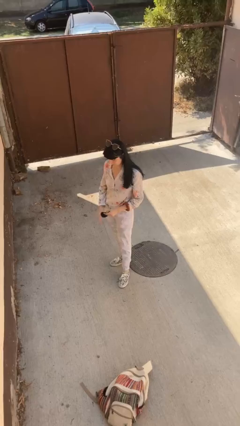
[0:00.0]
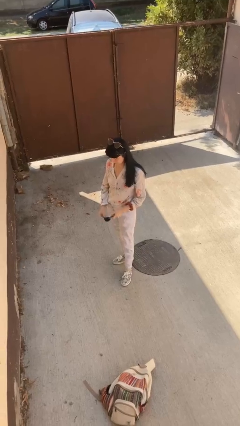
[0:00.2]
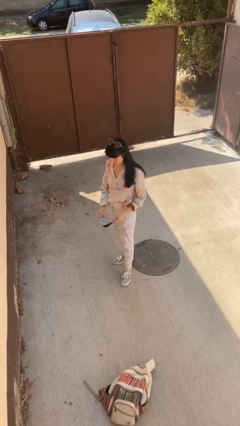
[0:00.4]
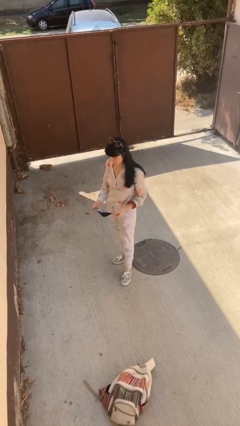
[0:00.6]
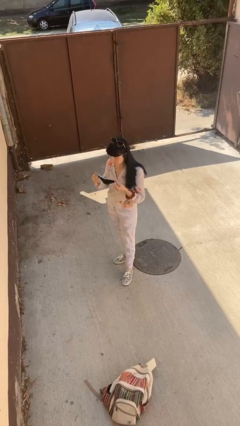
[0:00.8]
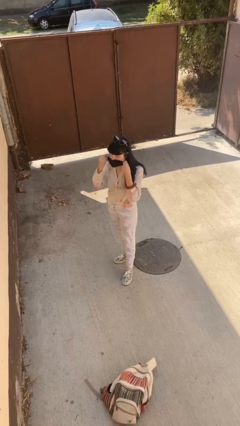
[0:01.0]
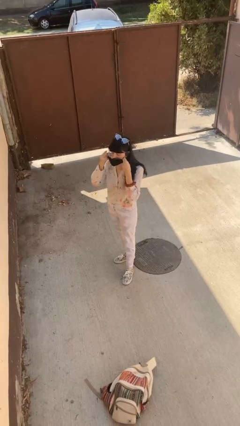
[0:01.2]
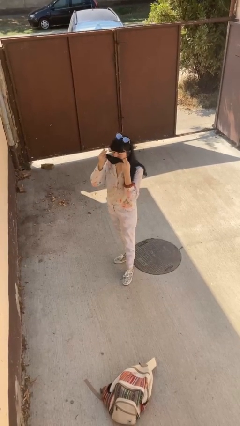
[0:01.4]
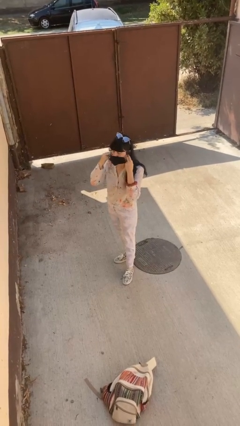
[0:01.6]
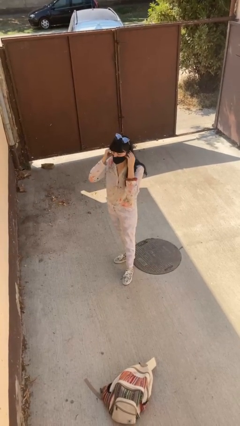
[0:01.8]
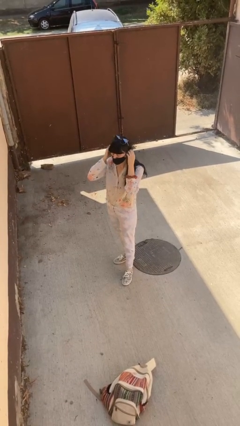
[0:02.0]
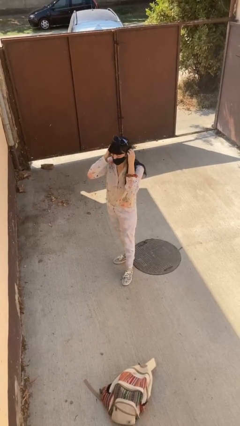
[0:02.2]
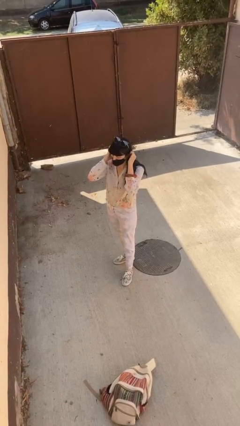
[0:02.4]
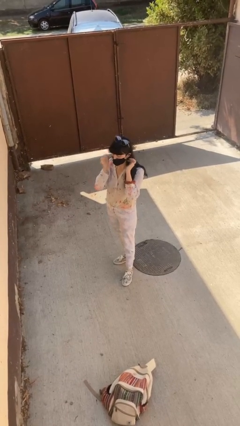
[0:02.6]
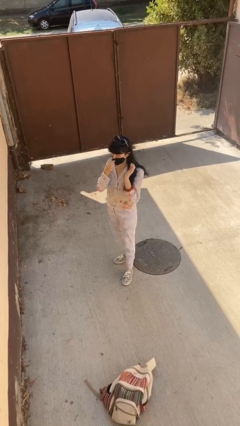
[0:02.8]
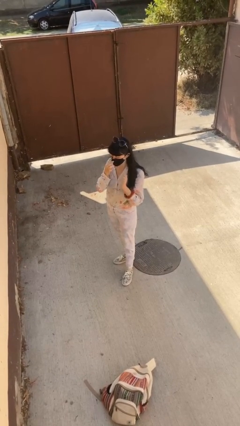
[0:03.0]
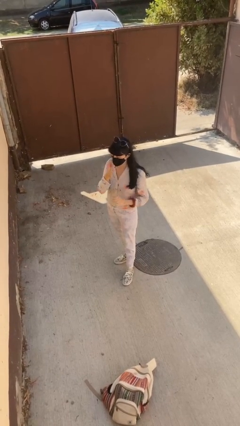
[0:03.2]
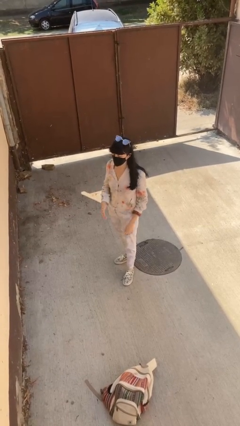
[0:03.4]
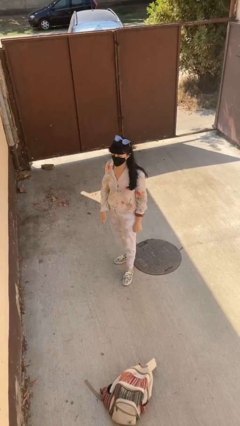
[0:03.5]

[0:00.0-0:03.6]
person puts on facemask

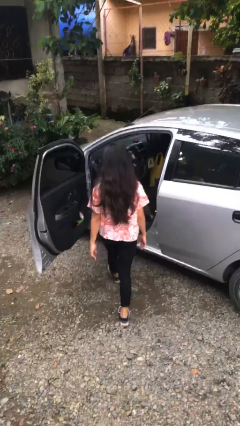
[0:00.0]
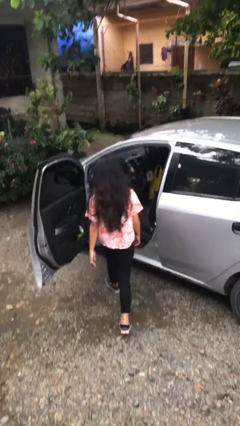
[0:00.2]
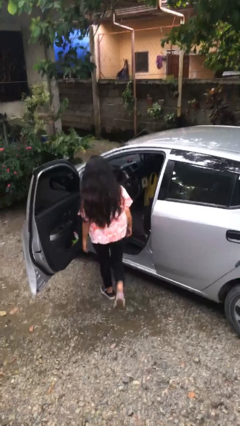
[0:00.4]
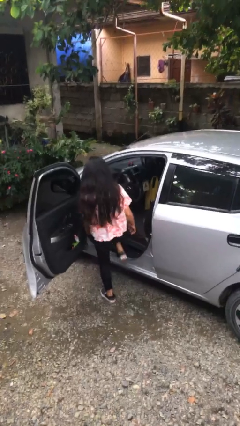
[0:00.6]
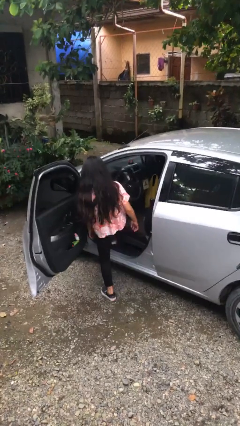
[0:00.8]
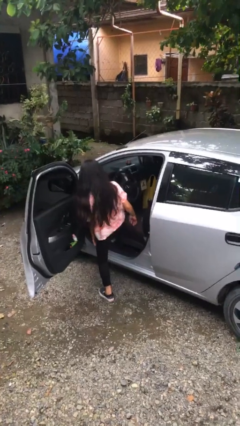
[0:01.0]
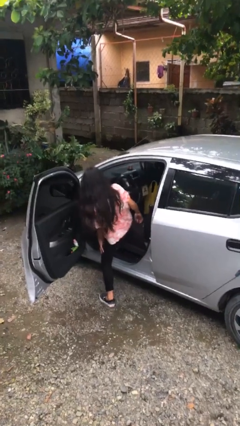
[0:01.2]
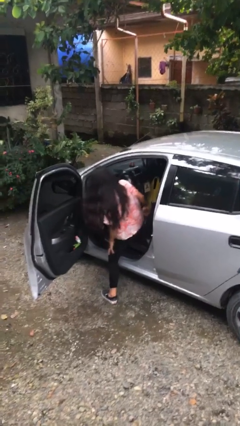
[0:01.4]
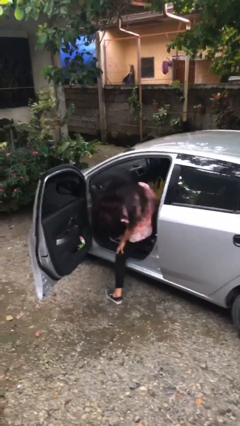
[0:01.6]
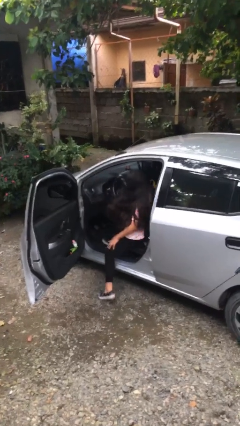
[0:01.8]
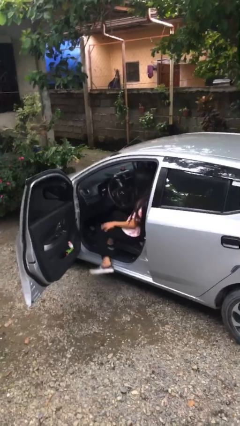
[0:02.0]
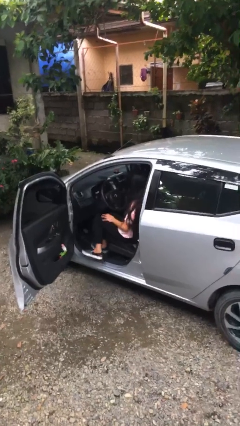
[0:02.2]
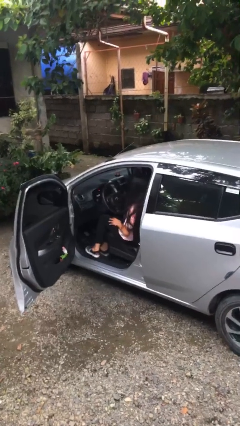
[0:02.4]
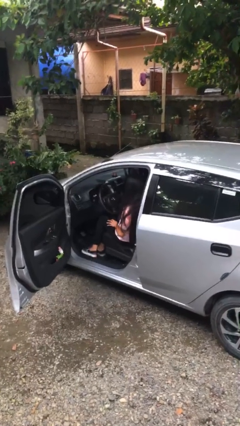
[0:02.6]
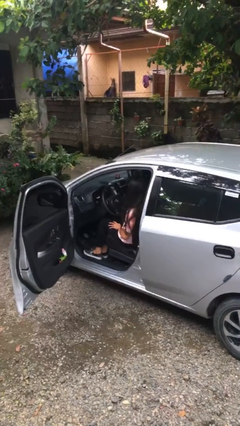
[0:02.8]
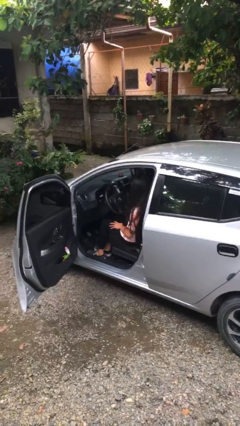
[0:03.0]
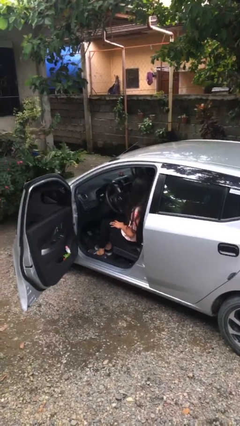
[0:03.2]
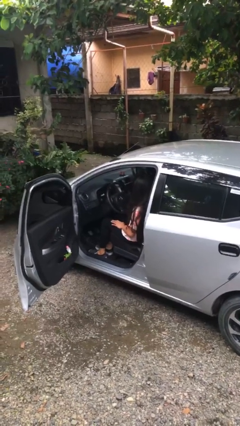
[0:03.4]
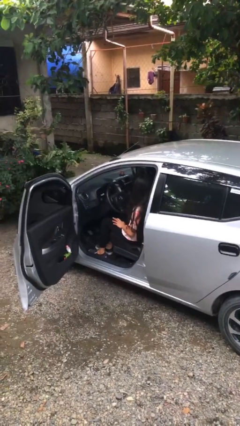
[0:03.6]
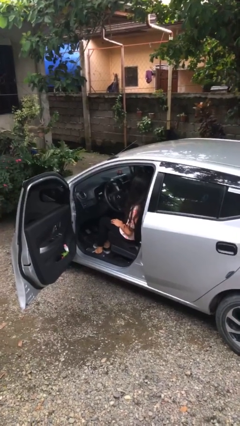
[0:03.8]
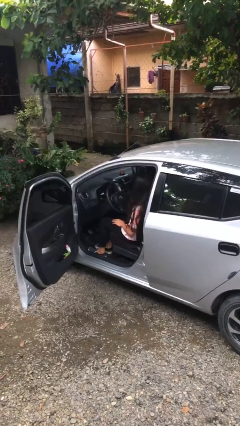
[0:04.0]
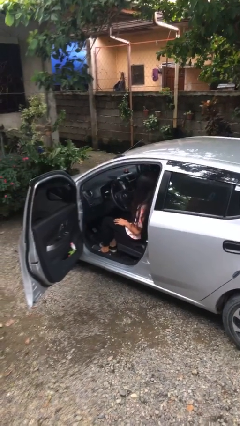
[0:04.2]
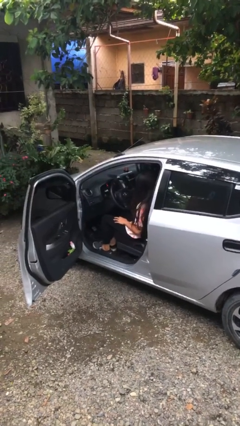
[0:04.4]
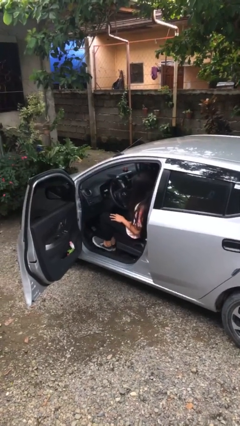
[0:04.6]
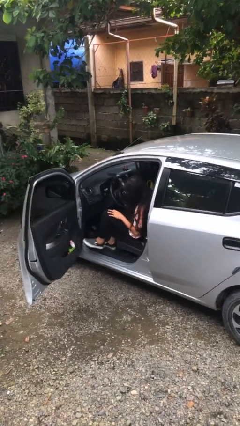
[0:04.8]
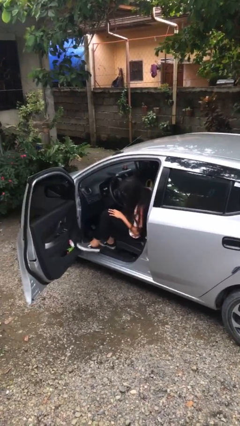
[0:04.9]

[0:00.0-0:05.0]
person enters car

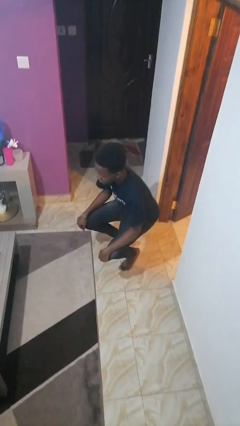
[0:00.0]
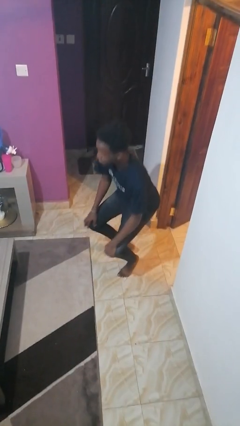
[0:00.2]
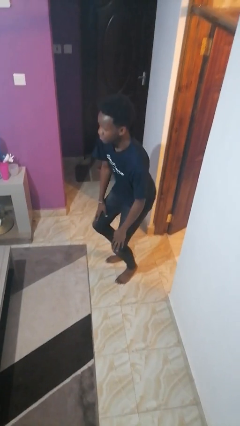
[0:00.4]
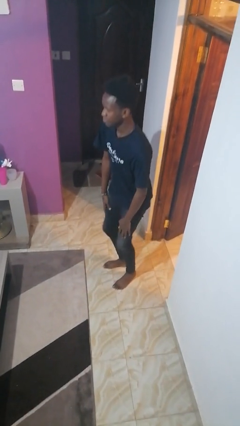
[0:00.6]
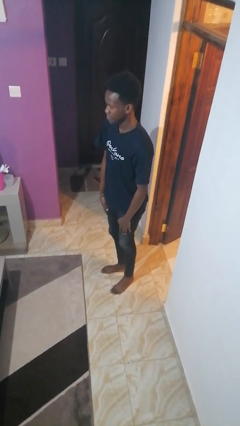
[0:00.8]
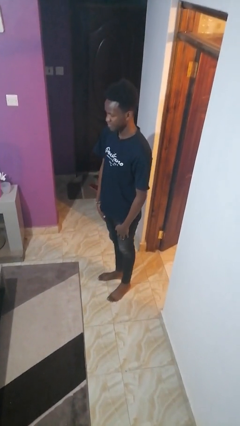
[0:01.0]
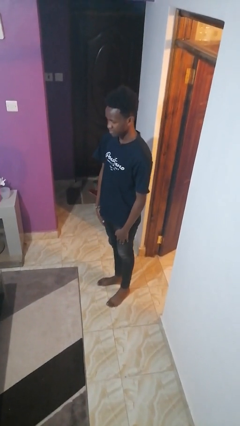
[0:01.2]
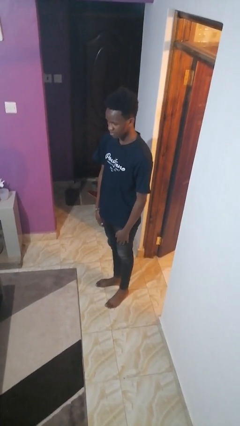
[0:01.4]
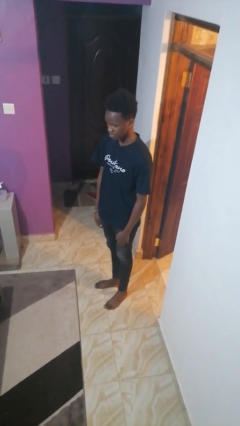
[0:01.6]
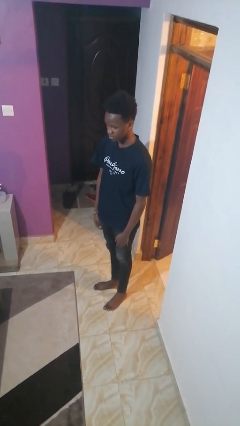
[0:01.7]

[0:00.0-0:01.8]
person stands up

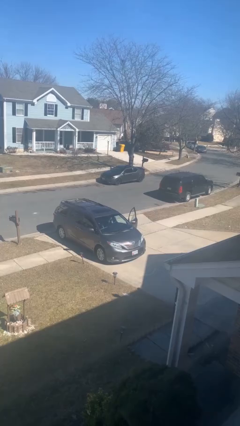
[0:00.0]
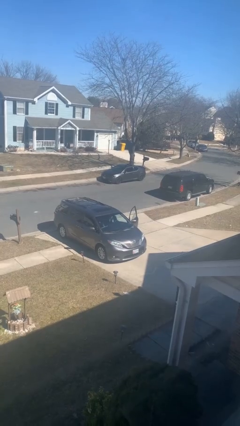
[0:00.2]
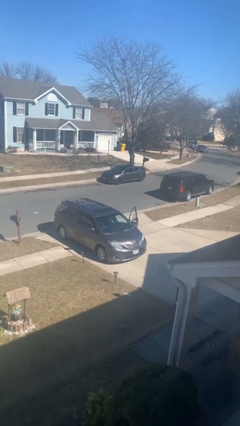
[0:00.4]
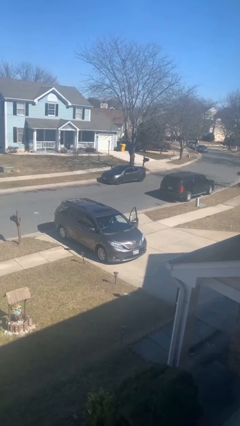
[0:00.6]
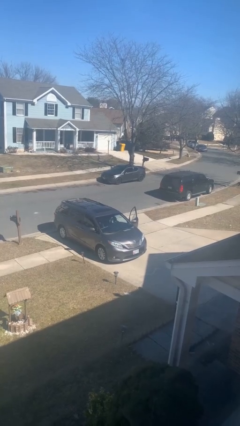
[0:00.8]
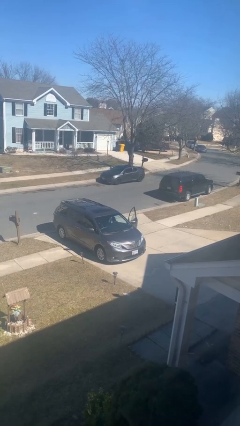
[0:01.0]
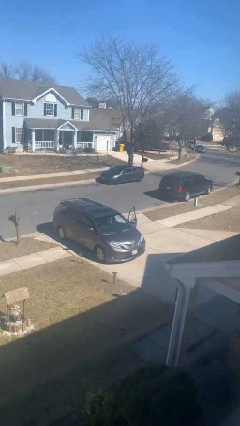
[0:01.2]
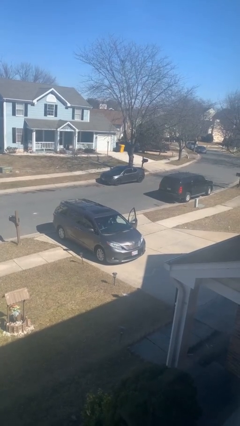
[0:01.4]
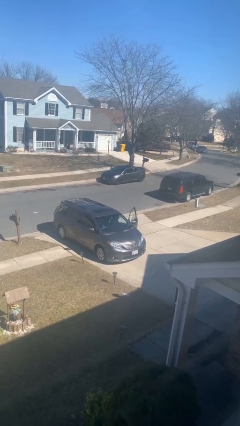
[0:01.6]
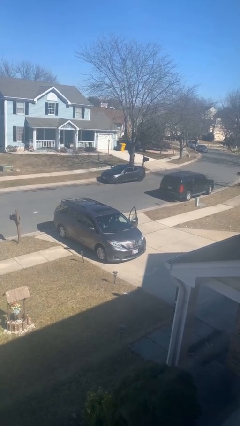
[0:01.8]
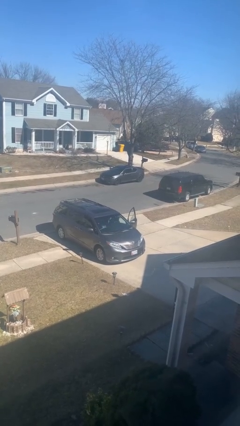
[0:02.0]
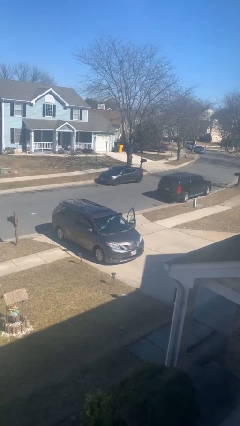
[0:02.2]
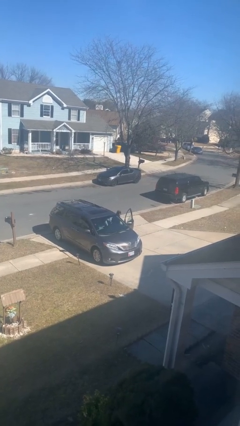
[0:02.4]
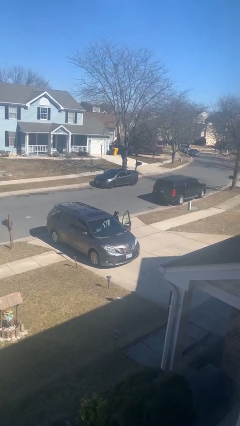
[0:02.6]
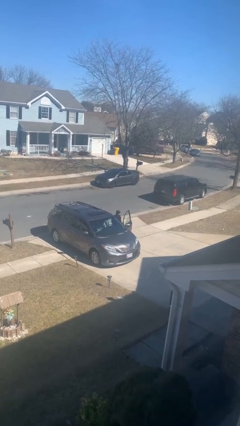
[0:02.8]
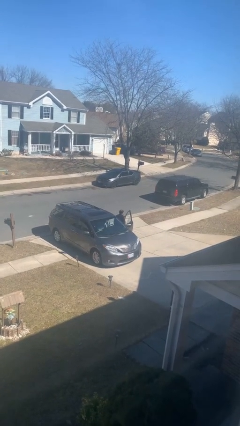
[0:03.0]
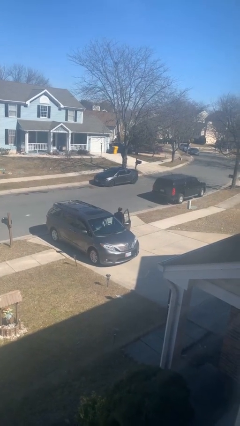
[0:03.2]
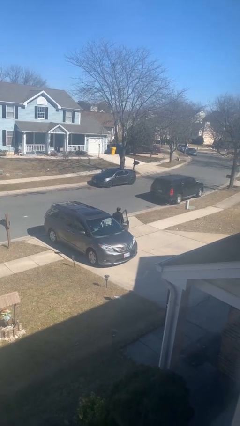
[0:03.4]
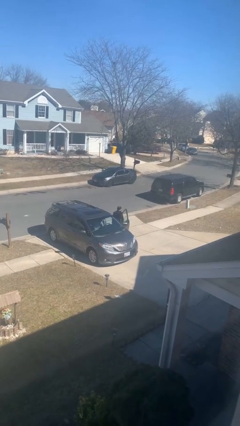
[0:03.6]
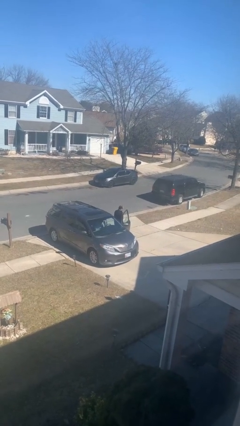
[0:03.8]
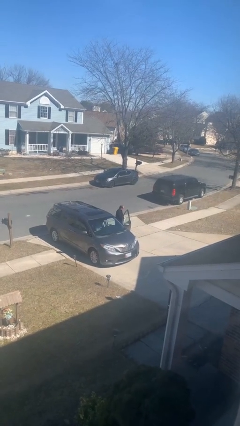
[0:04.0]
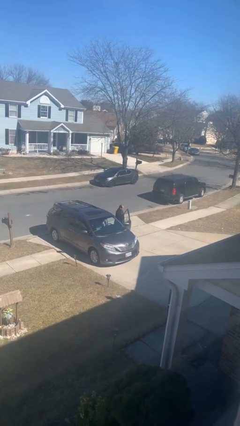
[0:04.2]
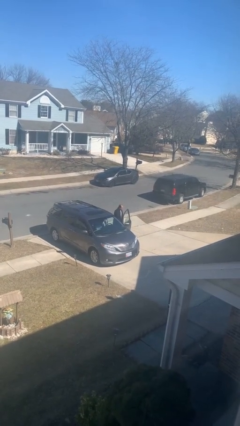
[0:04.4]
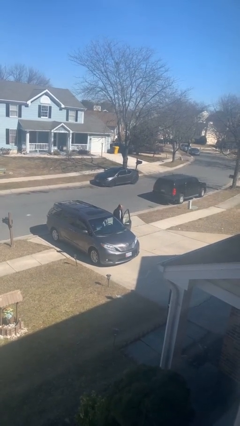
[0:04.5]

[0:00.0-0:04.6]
person exits car

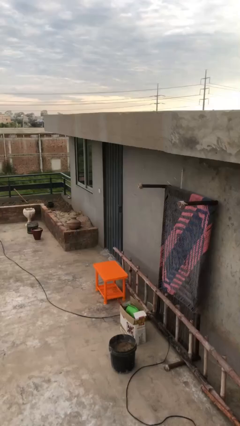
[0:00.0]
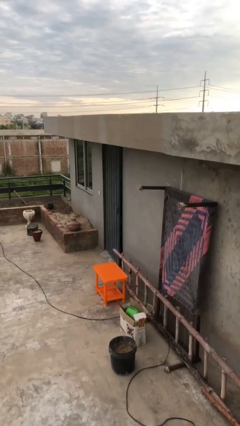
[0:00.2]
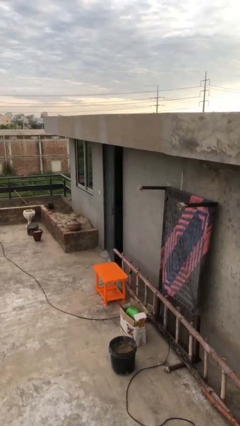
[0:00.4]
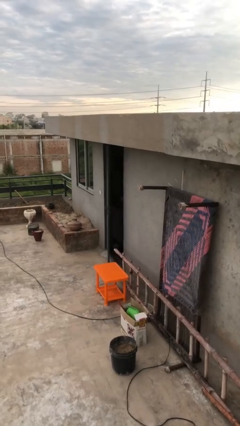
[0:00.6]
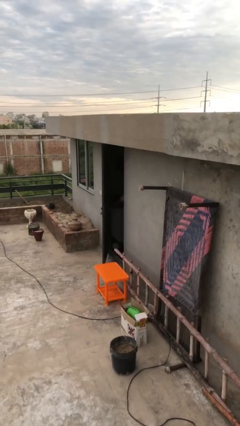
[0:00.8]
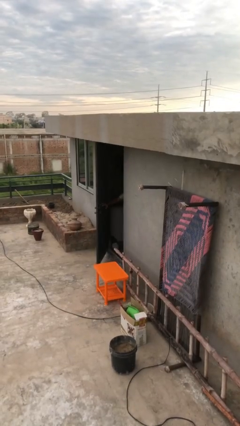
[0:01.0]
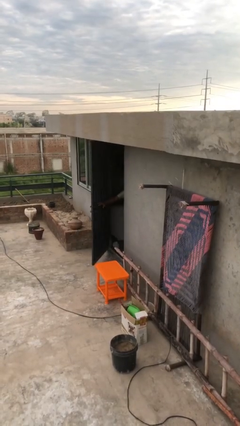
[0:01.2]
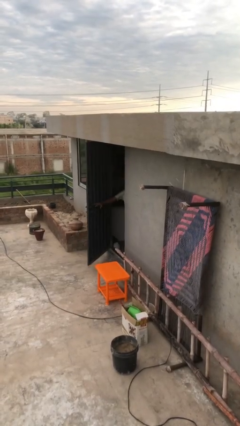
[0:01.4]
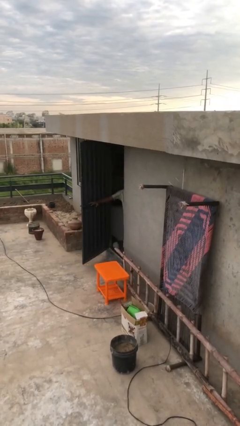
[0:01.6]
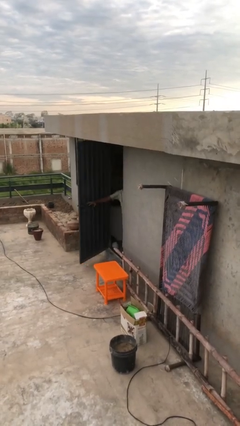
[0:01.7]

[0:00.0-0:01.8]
person opens facility door

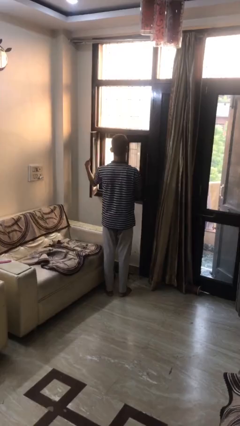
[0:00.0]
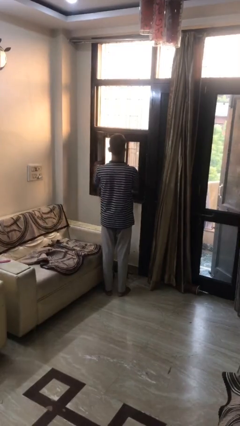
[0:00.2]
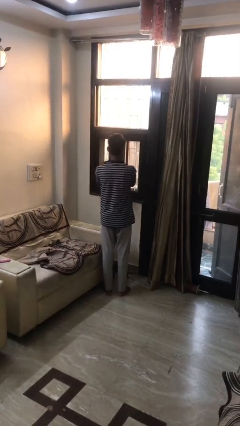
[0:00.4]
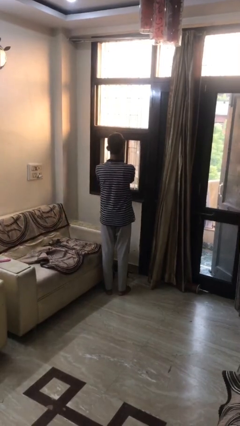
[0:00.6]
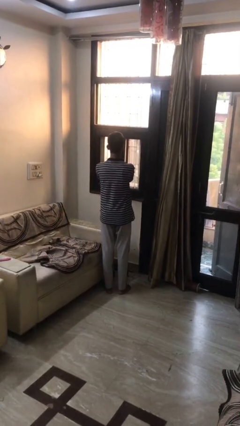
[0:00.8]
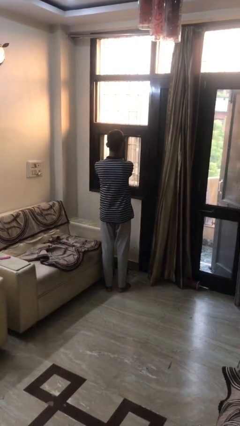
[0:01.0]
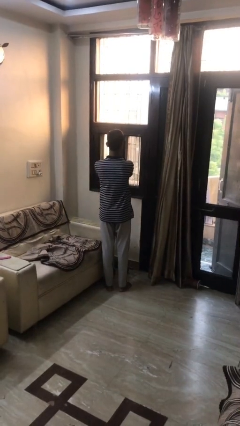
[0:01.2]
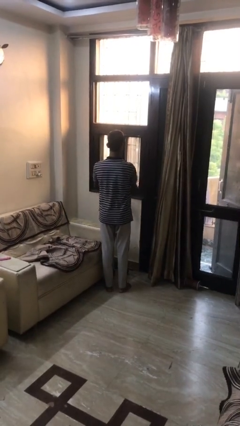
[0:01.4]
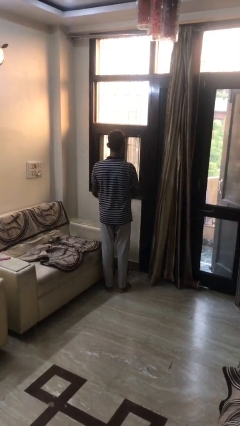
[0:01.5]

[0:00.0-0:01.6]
person closes home window
